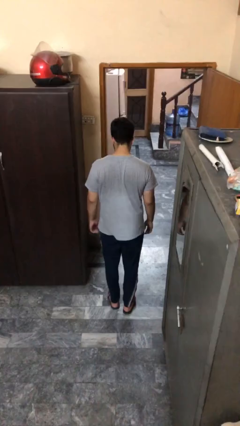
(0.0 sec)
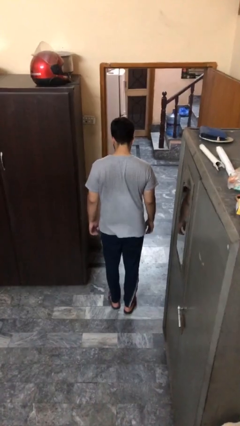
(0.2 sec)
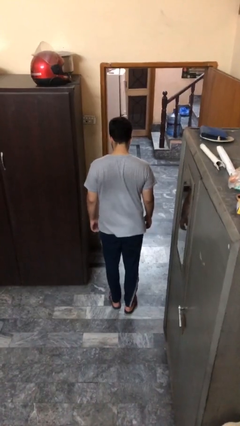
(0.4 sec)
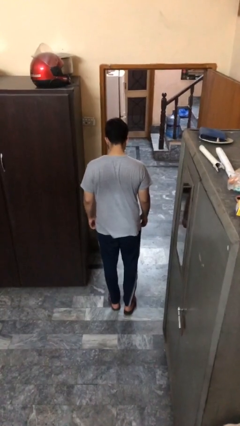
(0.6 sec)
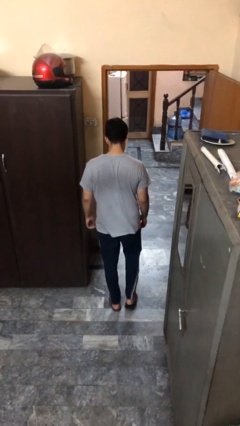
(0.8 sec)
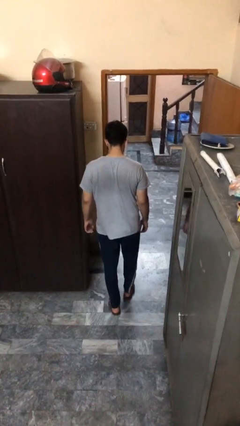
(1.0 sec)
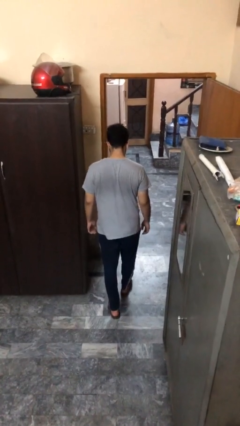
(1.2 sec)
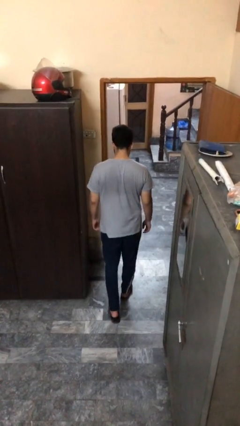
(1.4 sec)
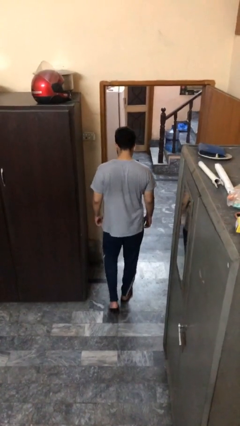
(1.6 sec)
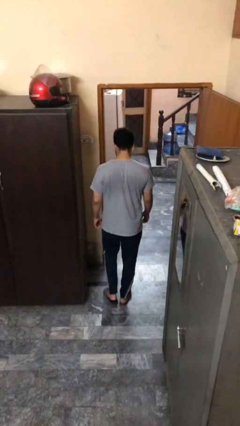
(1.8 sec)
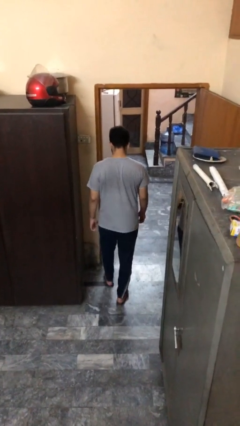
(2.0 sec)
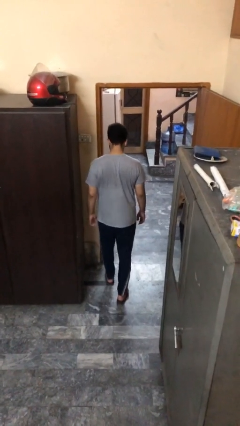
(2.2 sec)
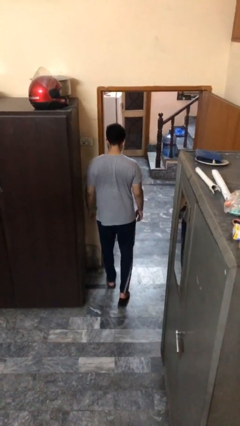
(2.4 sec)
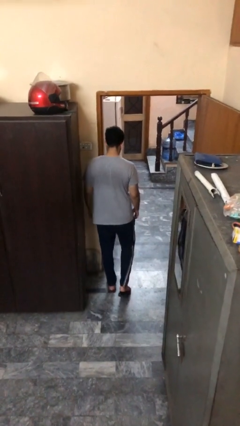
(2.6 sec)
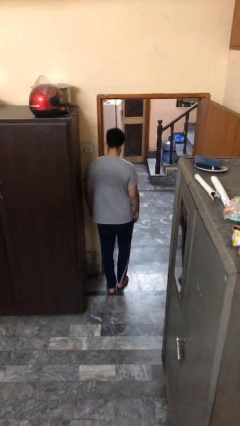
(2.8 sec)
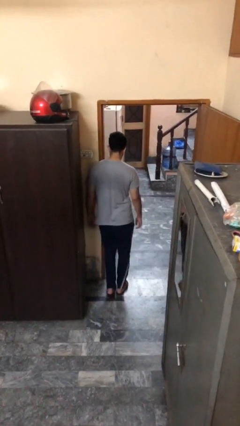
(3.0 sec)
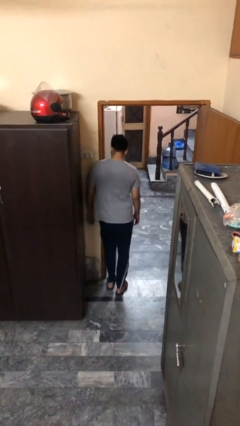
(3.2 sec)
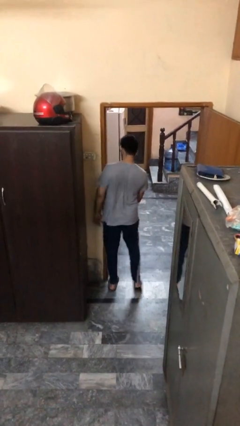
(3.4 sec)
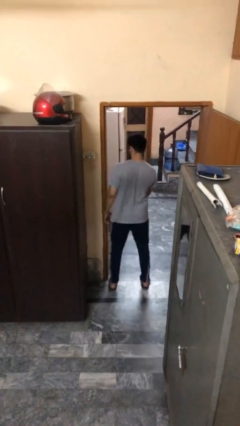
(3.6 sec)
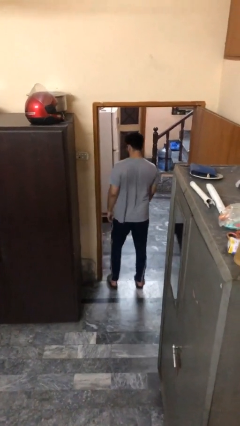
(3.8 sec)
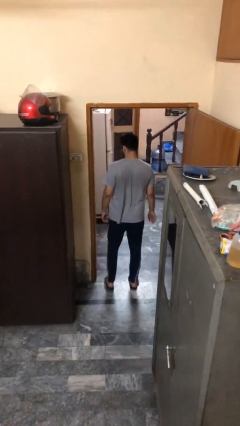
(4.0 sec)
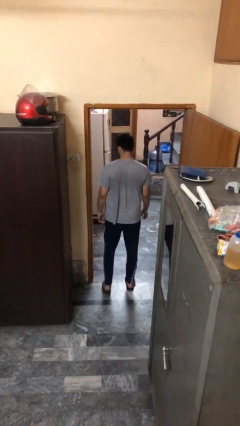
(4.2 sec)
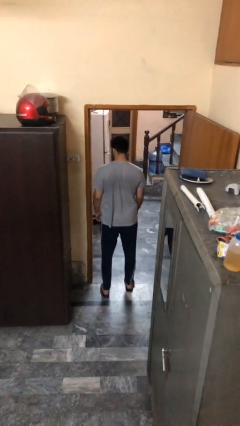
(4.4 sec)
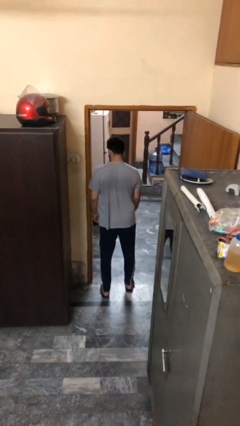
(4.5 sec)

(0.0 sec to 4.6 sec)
person bumps into wall

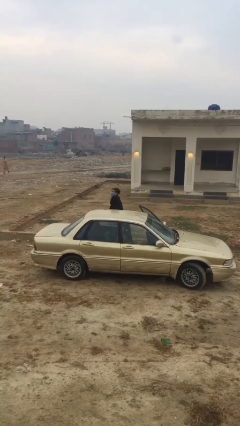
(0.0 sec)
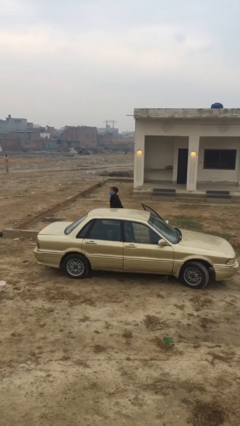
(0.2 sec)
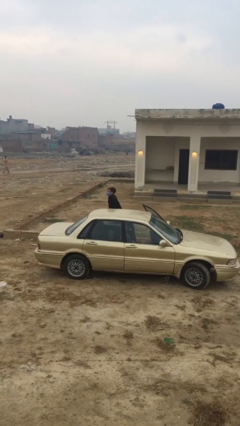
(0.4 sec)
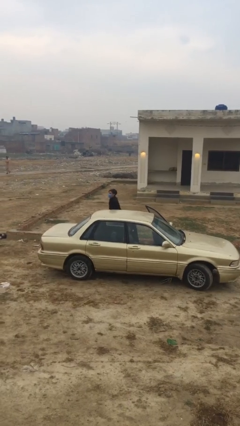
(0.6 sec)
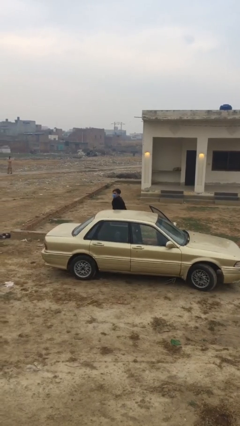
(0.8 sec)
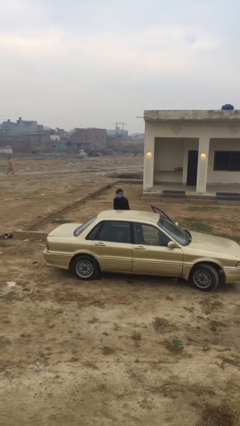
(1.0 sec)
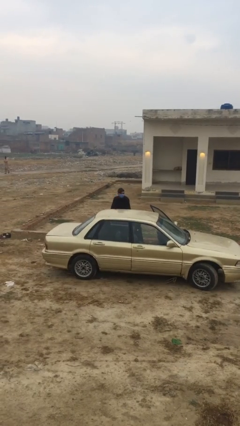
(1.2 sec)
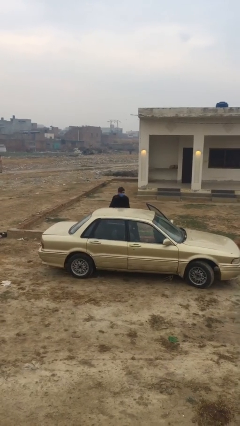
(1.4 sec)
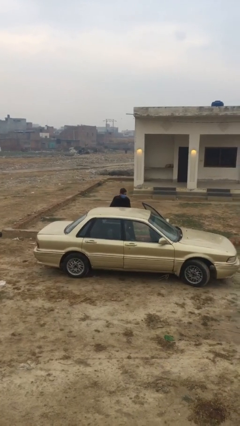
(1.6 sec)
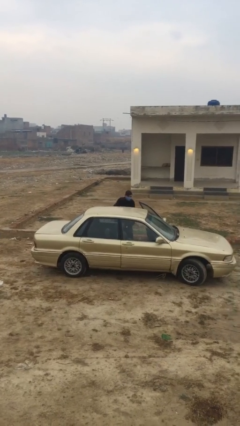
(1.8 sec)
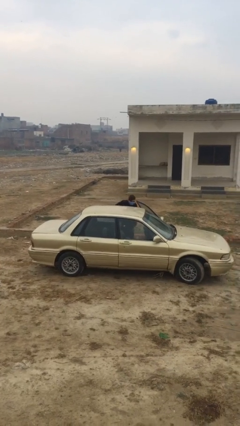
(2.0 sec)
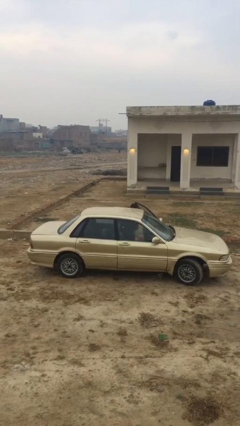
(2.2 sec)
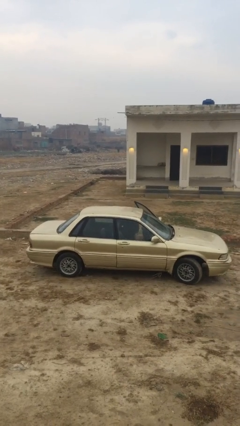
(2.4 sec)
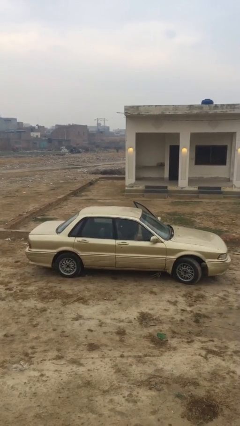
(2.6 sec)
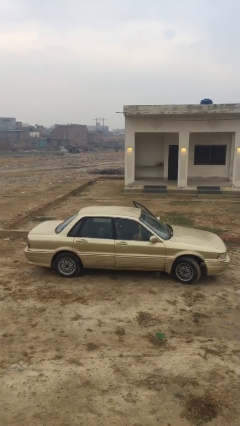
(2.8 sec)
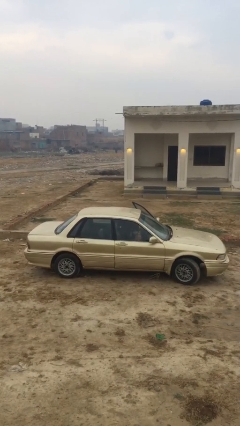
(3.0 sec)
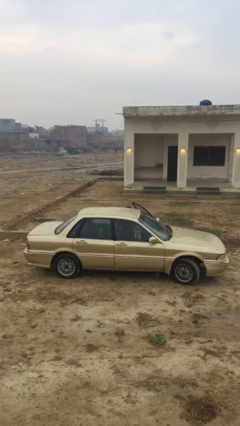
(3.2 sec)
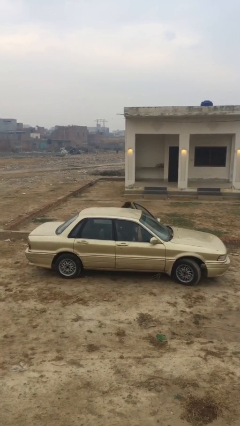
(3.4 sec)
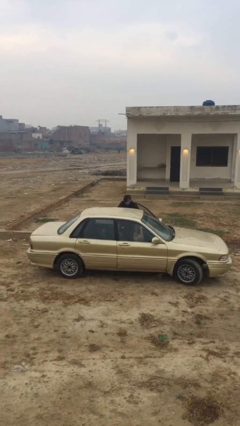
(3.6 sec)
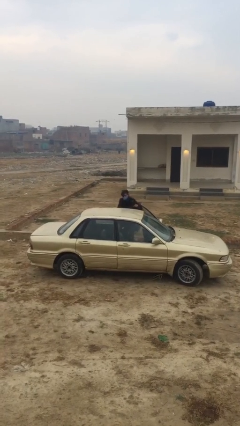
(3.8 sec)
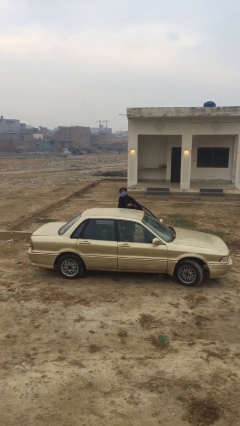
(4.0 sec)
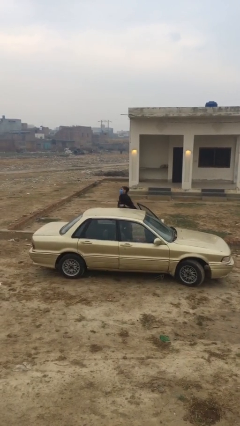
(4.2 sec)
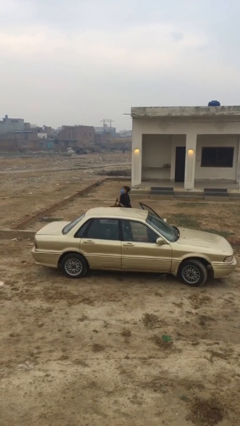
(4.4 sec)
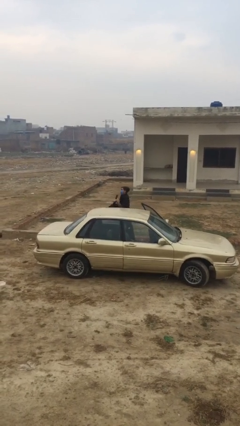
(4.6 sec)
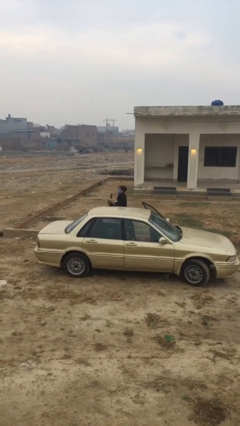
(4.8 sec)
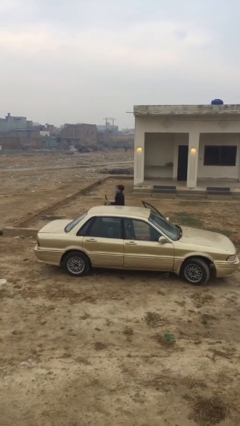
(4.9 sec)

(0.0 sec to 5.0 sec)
person unloads car

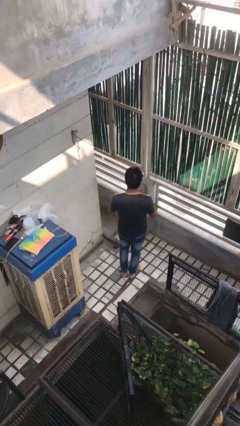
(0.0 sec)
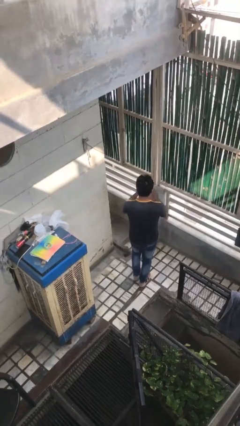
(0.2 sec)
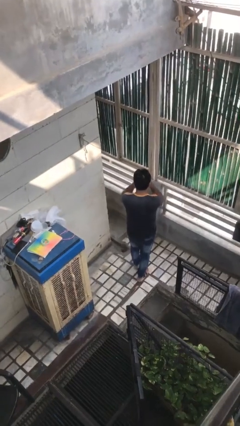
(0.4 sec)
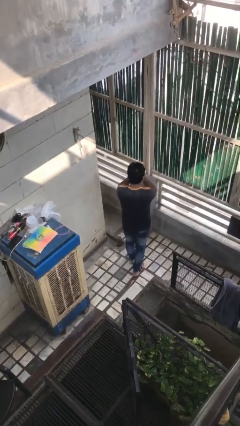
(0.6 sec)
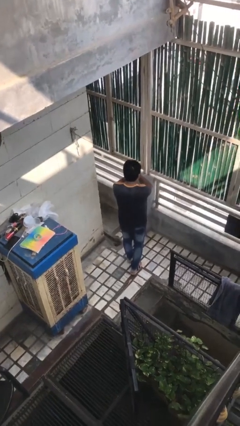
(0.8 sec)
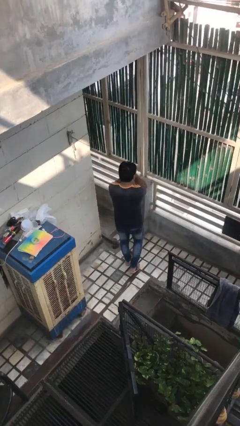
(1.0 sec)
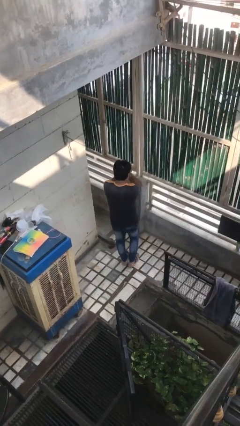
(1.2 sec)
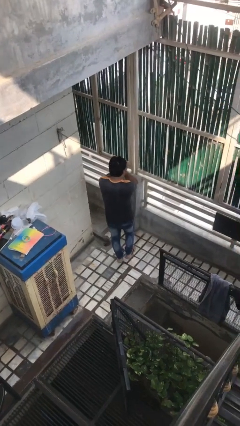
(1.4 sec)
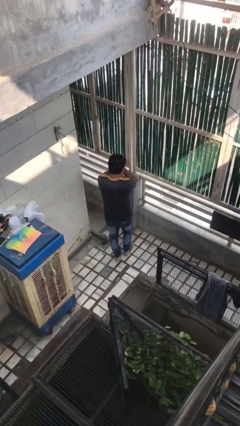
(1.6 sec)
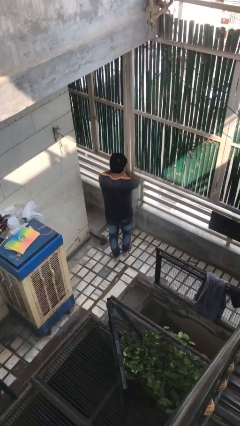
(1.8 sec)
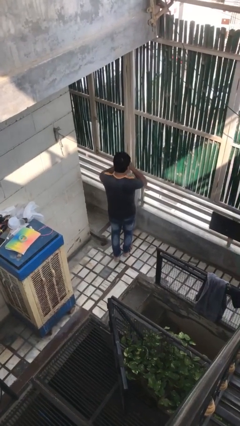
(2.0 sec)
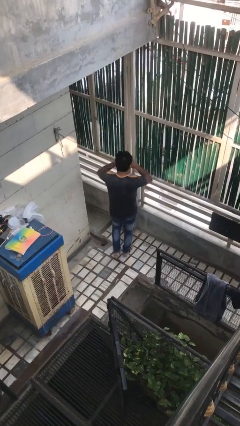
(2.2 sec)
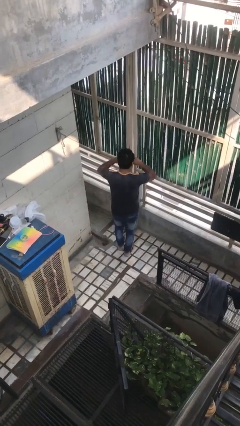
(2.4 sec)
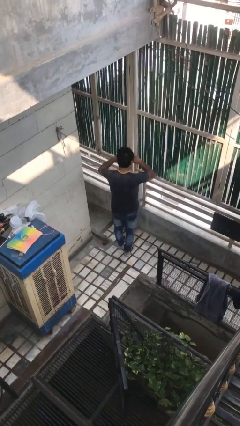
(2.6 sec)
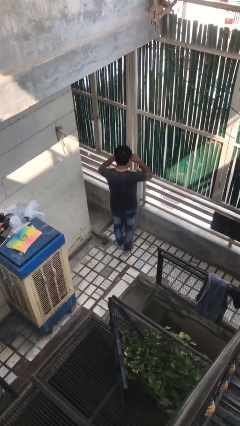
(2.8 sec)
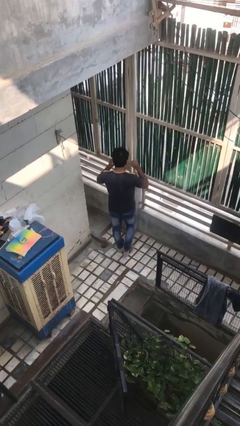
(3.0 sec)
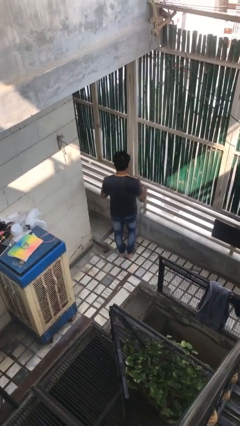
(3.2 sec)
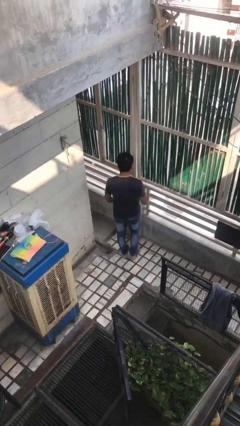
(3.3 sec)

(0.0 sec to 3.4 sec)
person rubs eyes

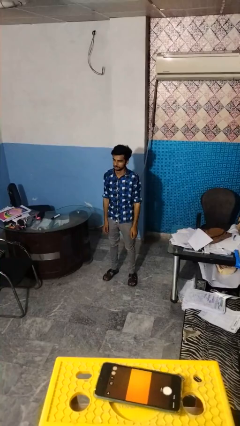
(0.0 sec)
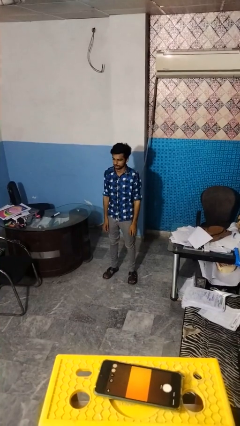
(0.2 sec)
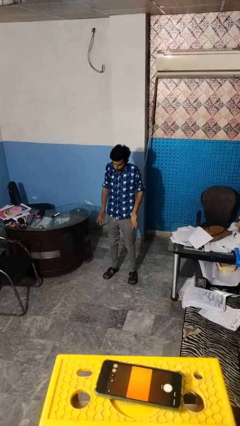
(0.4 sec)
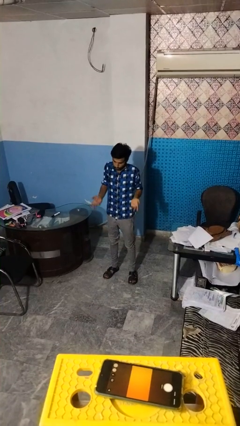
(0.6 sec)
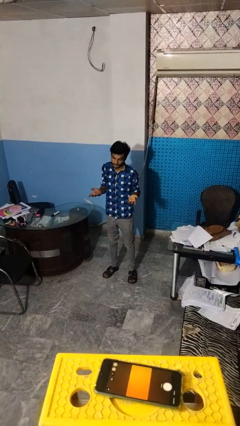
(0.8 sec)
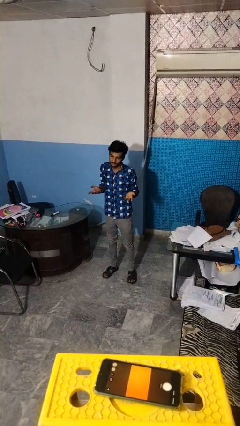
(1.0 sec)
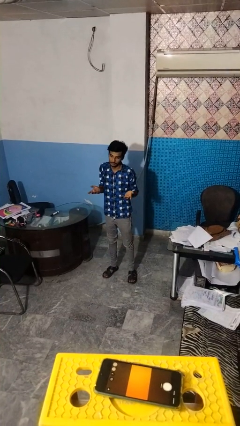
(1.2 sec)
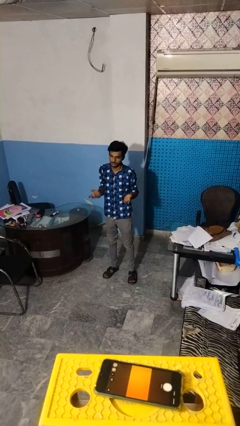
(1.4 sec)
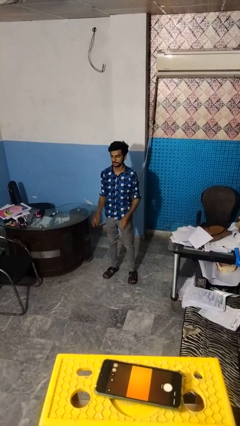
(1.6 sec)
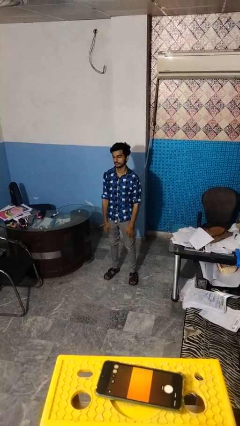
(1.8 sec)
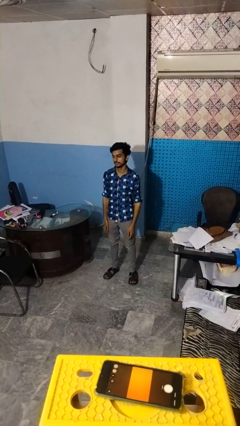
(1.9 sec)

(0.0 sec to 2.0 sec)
person shrugs

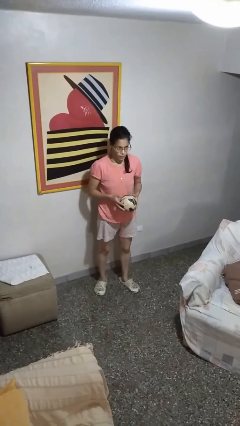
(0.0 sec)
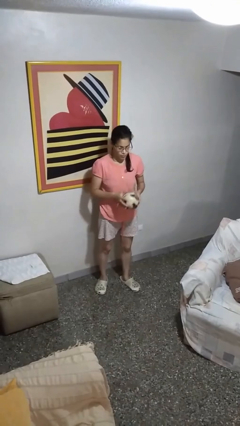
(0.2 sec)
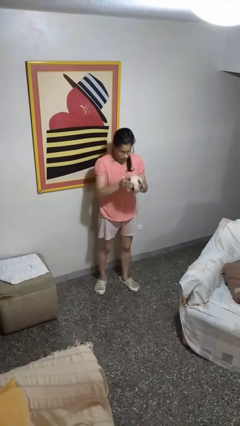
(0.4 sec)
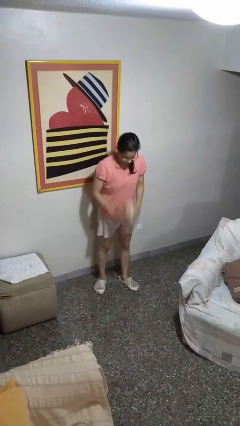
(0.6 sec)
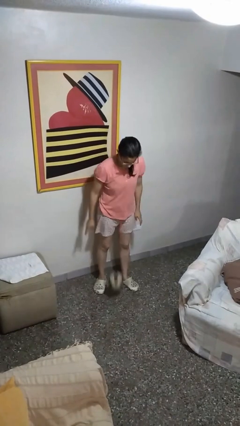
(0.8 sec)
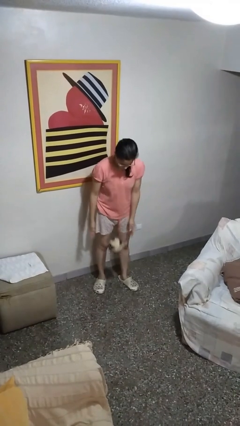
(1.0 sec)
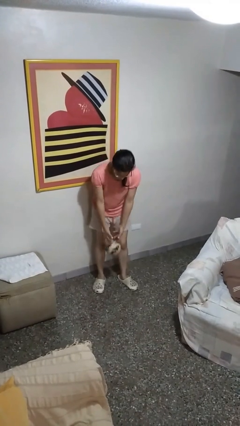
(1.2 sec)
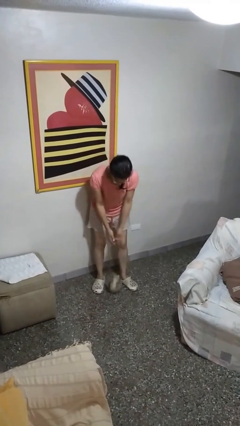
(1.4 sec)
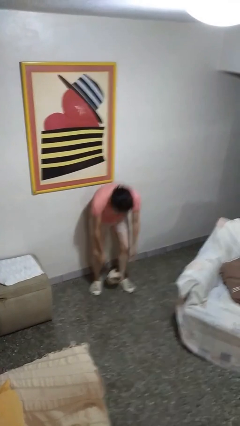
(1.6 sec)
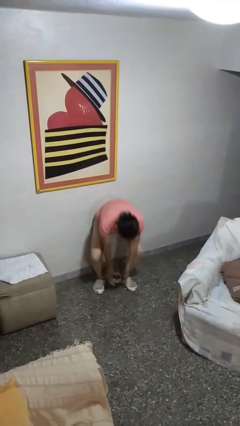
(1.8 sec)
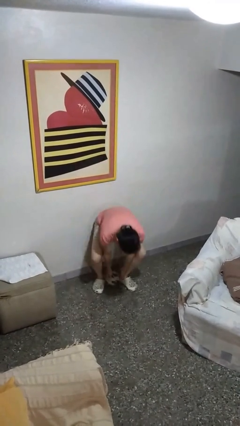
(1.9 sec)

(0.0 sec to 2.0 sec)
person bounces ball on floor

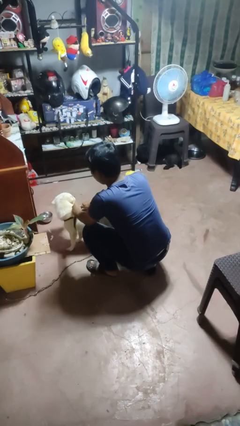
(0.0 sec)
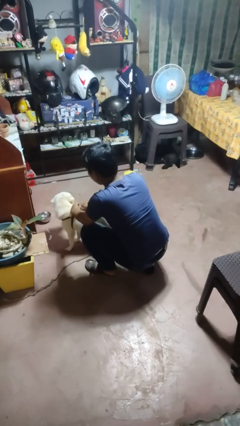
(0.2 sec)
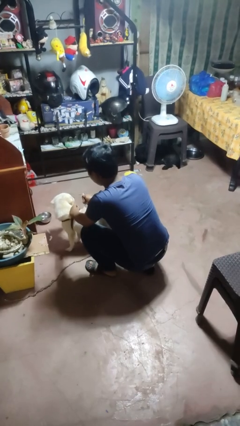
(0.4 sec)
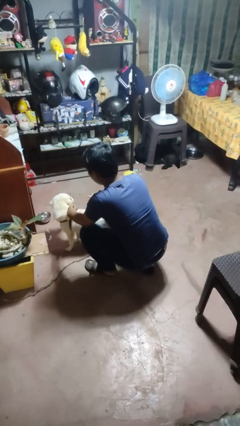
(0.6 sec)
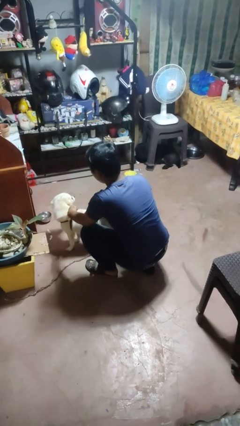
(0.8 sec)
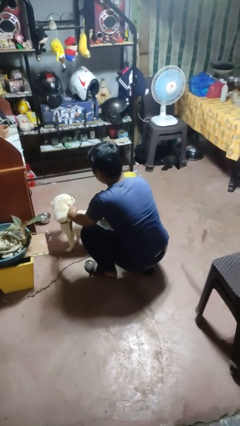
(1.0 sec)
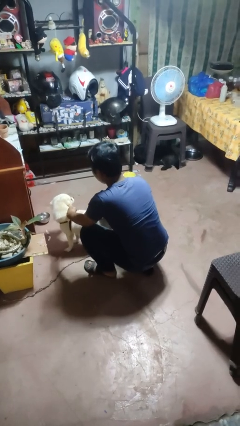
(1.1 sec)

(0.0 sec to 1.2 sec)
person unattaches leash from dog
